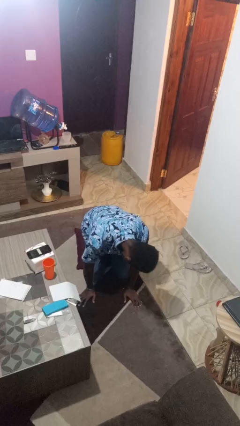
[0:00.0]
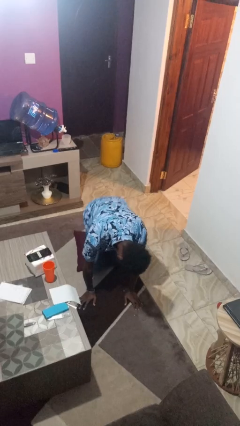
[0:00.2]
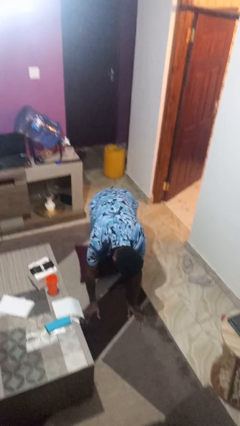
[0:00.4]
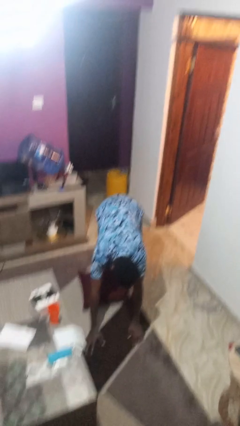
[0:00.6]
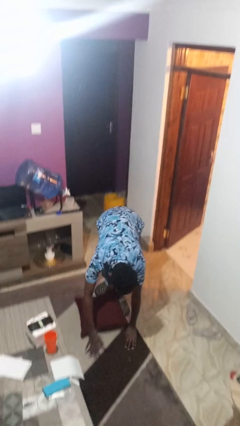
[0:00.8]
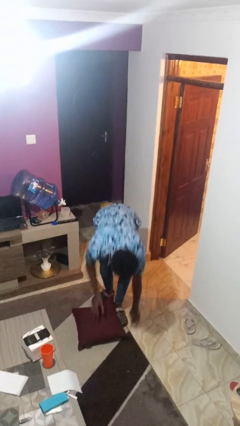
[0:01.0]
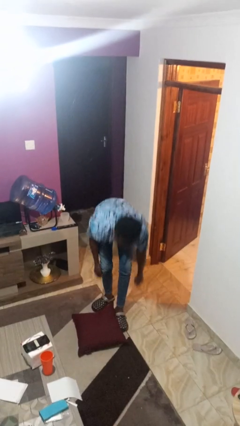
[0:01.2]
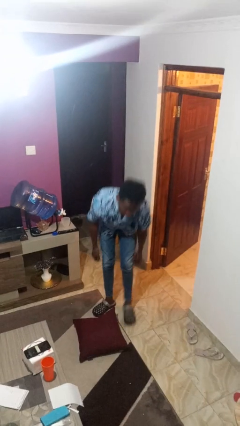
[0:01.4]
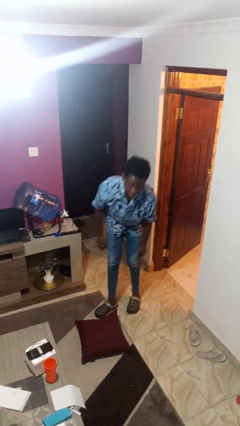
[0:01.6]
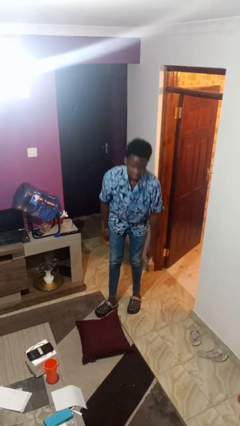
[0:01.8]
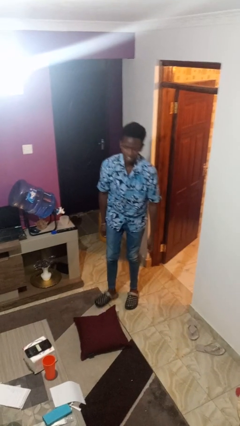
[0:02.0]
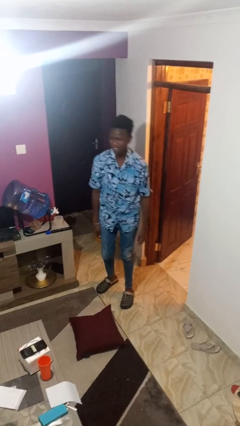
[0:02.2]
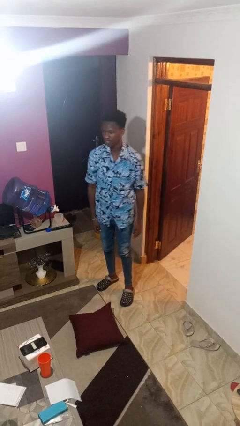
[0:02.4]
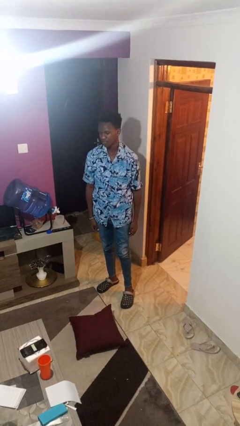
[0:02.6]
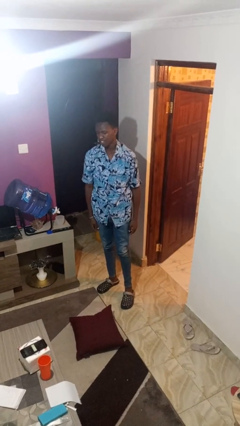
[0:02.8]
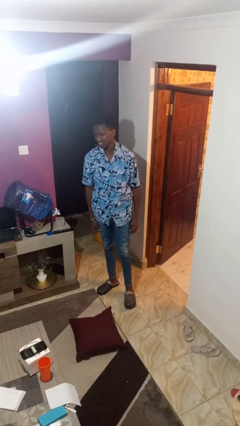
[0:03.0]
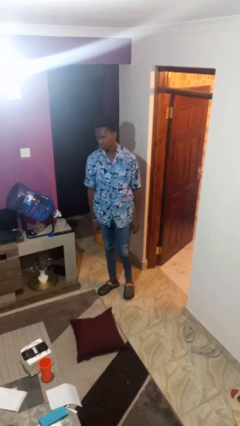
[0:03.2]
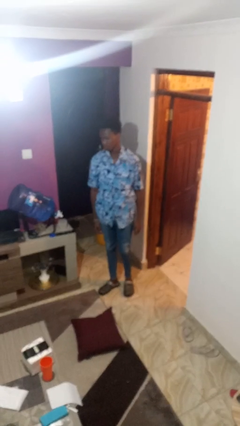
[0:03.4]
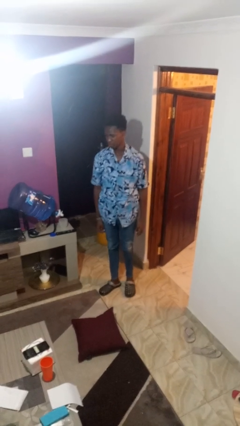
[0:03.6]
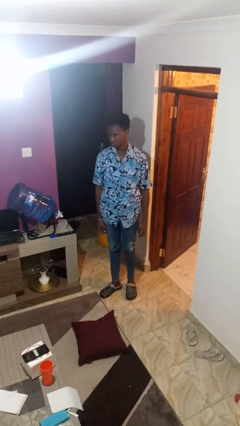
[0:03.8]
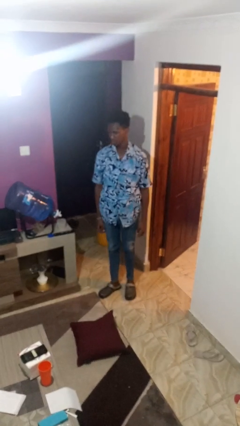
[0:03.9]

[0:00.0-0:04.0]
person stands up from floor

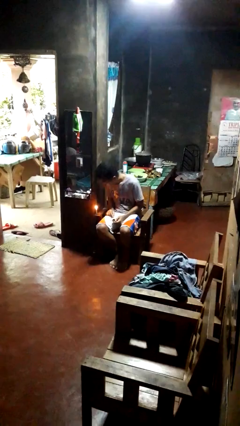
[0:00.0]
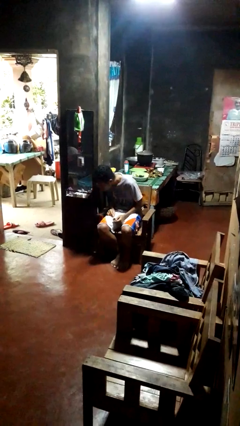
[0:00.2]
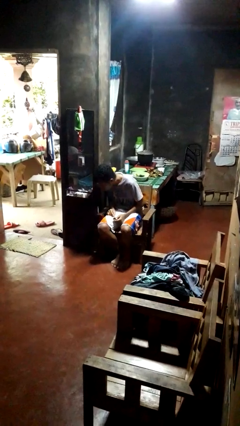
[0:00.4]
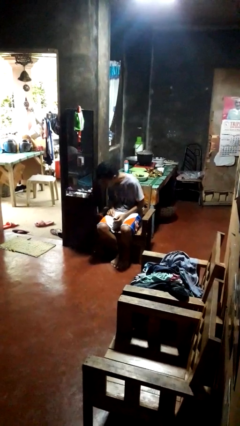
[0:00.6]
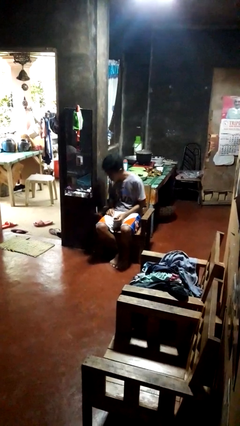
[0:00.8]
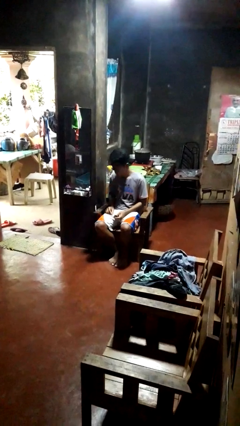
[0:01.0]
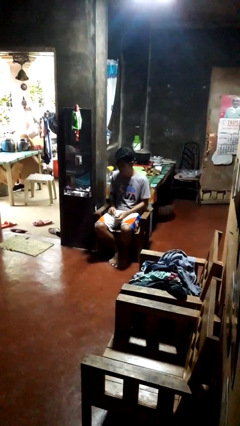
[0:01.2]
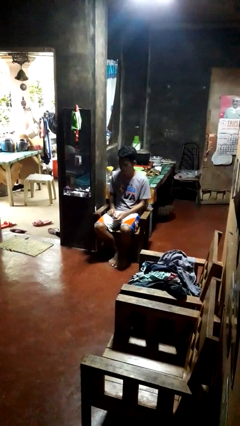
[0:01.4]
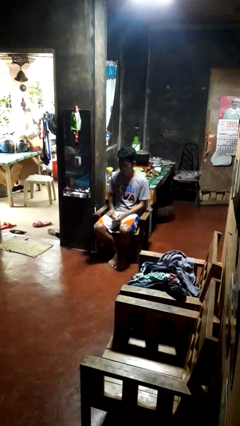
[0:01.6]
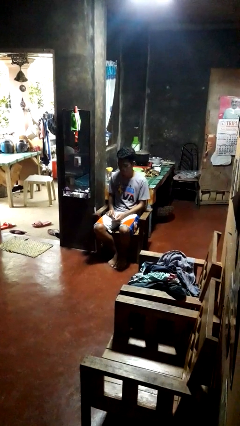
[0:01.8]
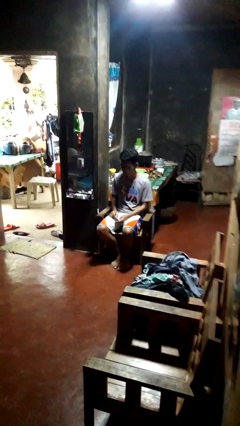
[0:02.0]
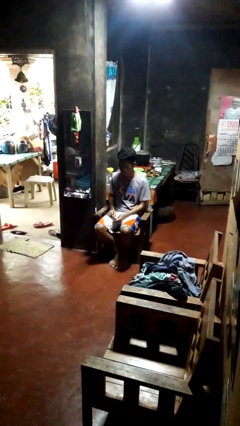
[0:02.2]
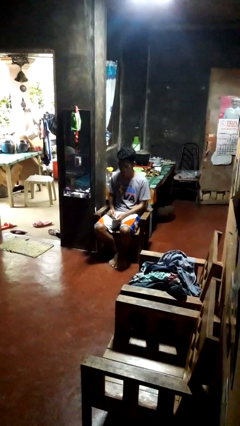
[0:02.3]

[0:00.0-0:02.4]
person extinguishes candle

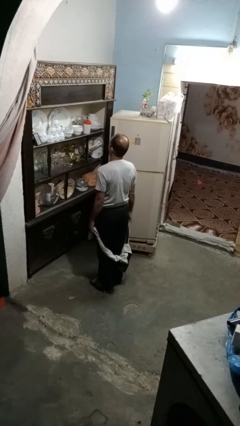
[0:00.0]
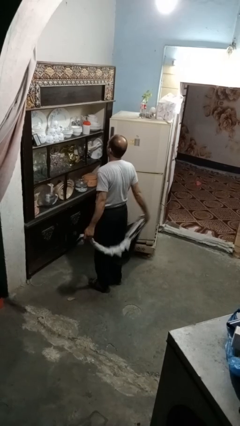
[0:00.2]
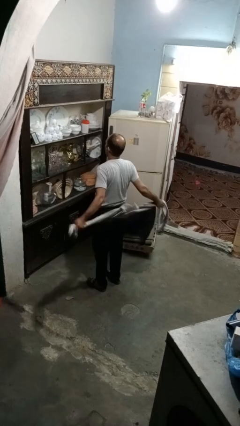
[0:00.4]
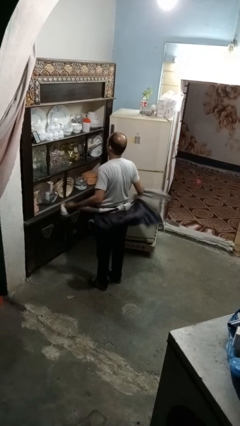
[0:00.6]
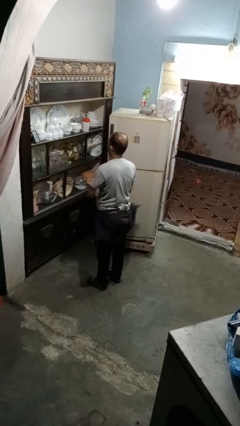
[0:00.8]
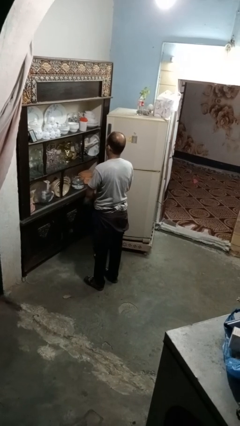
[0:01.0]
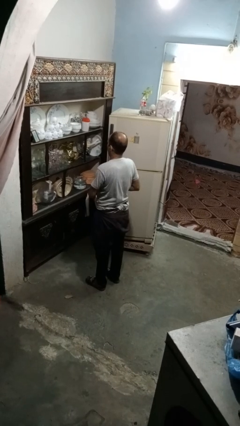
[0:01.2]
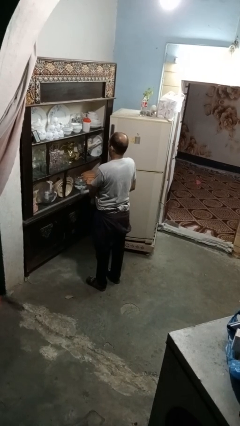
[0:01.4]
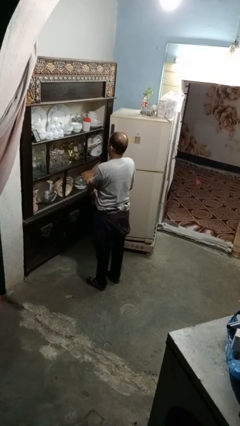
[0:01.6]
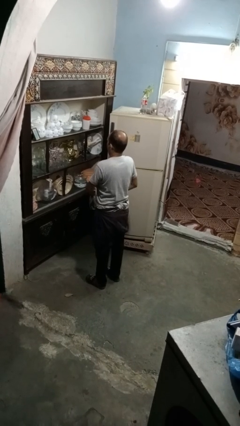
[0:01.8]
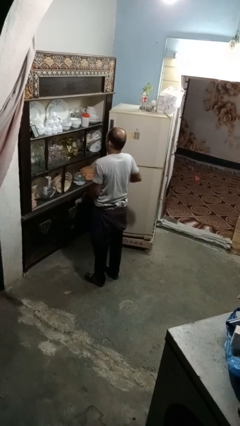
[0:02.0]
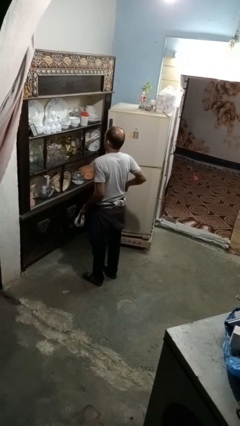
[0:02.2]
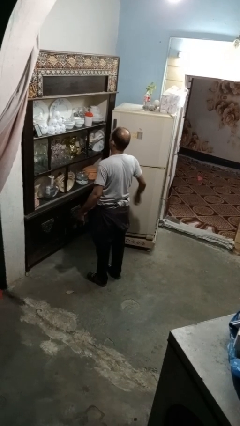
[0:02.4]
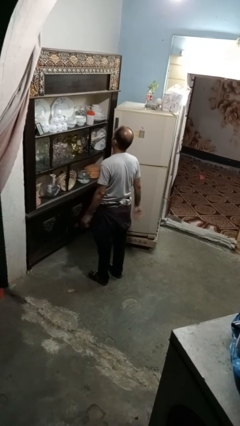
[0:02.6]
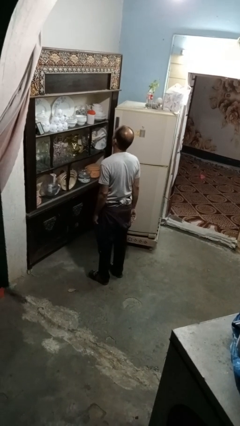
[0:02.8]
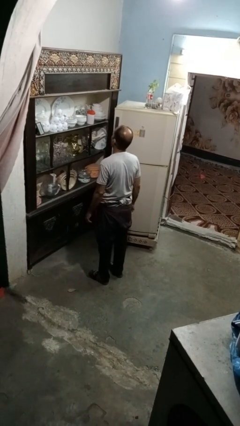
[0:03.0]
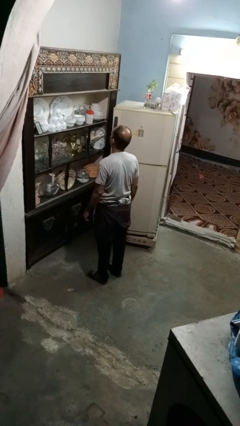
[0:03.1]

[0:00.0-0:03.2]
person ties jacket around waist

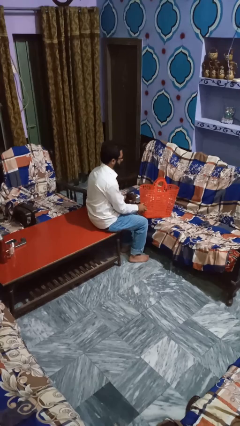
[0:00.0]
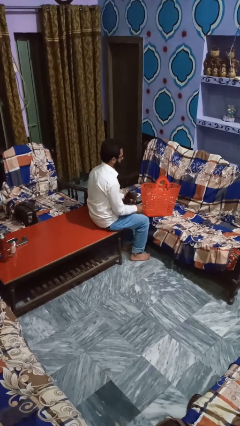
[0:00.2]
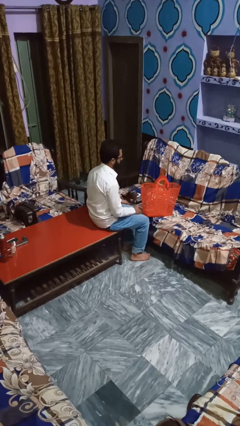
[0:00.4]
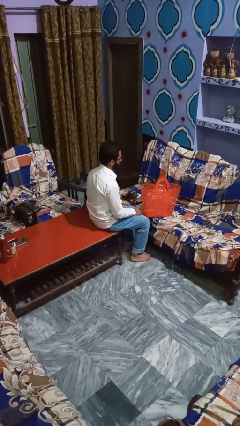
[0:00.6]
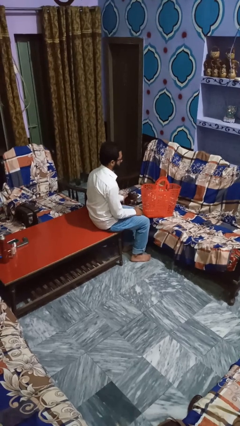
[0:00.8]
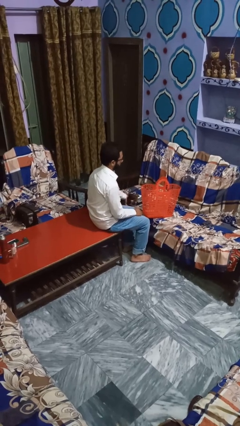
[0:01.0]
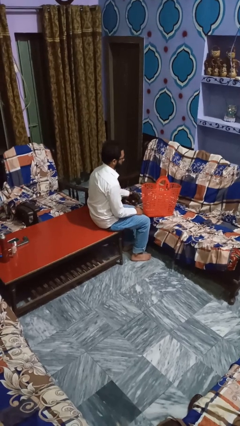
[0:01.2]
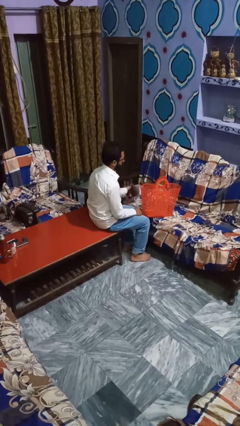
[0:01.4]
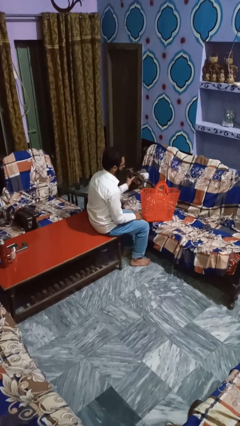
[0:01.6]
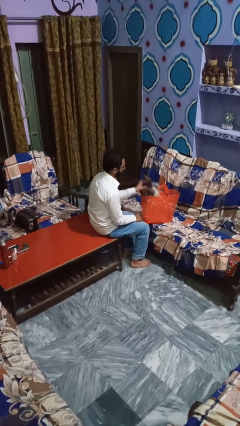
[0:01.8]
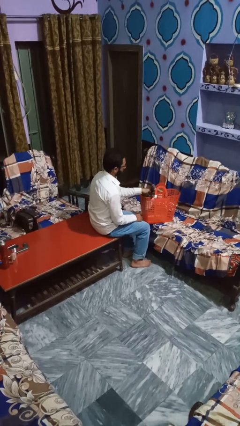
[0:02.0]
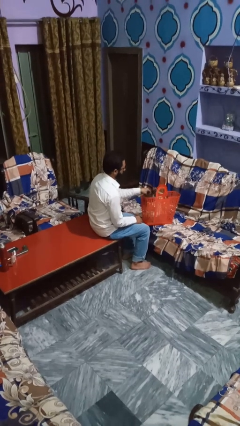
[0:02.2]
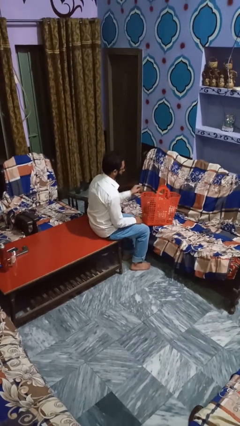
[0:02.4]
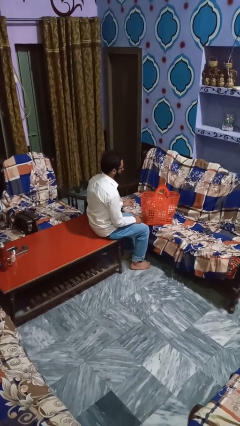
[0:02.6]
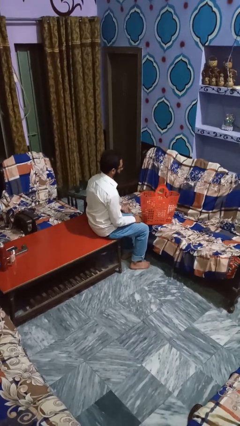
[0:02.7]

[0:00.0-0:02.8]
person discards trash

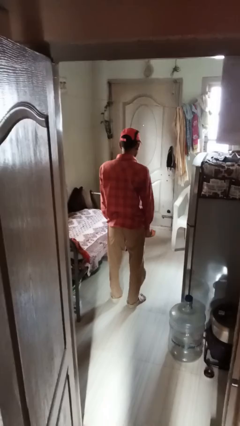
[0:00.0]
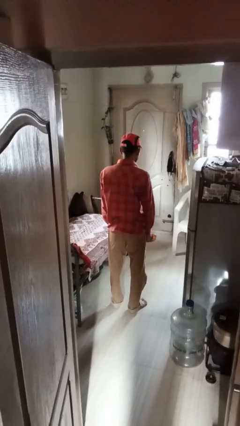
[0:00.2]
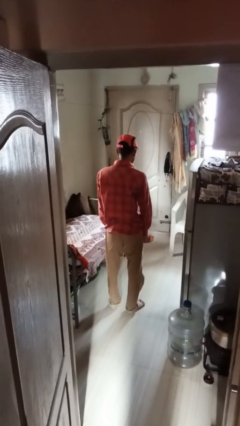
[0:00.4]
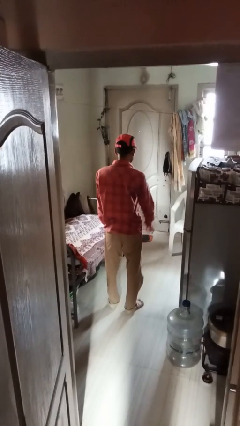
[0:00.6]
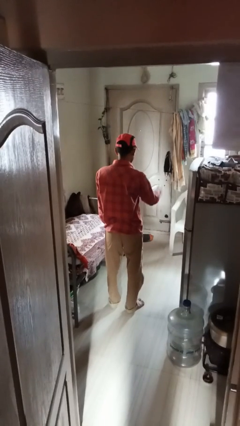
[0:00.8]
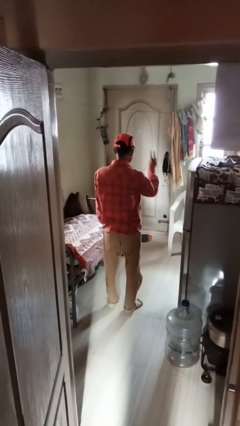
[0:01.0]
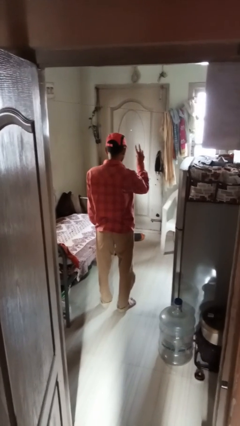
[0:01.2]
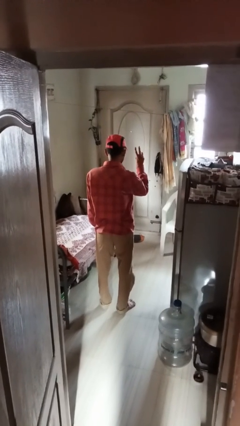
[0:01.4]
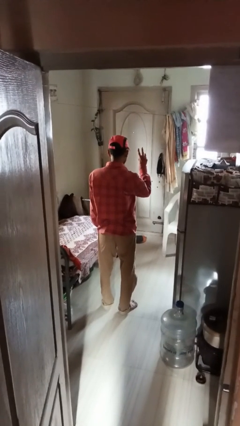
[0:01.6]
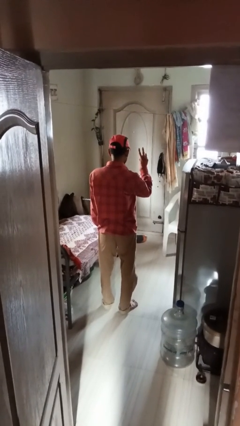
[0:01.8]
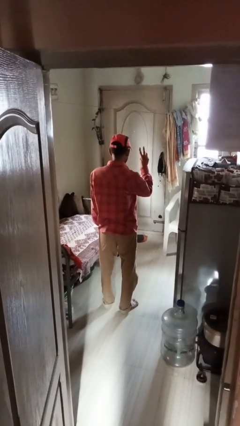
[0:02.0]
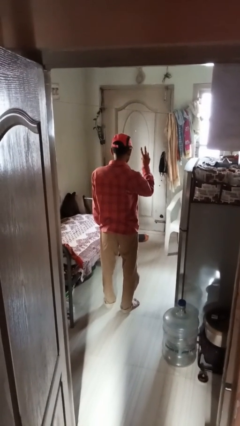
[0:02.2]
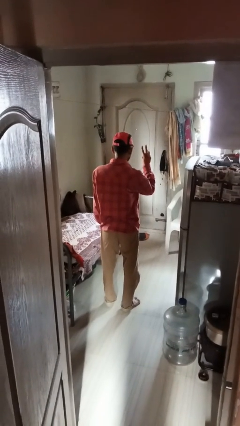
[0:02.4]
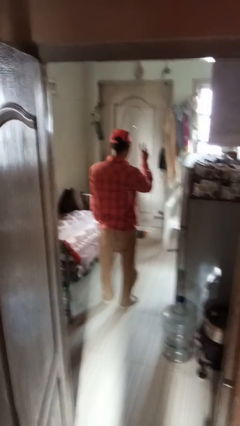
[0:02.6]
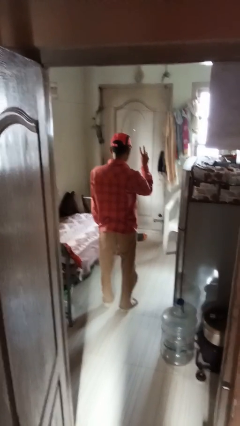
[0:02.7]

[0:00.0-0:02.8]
person gestures peace

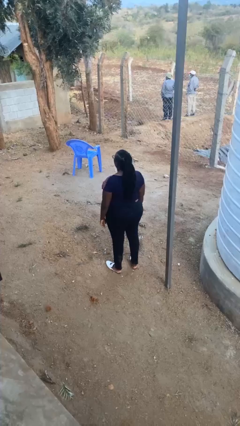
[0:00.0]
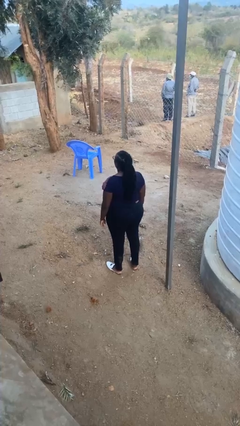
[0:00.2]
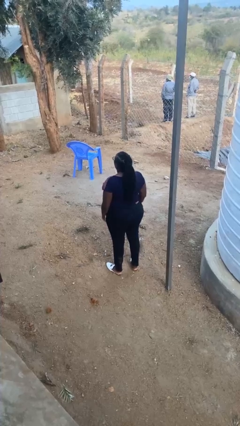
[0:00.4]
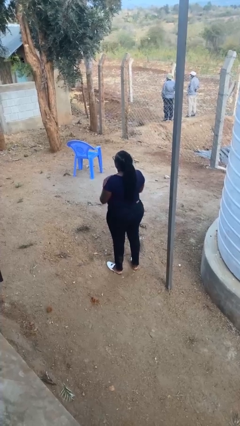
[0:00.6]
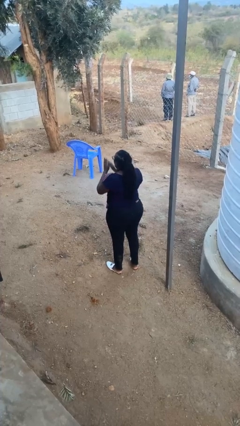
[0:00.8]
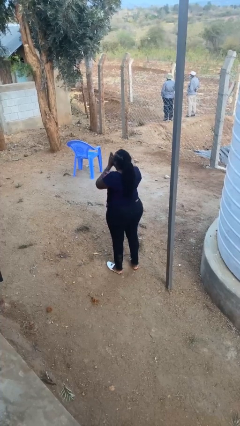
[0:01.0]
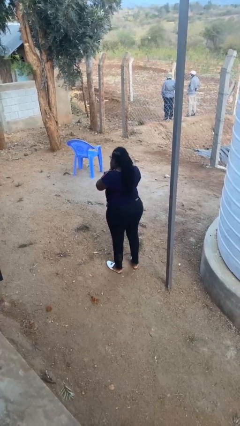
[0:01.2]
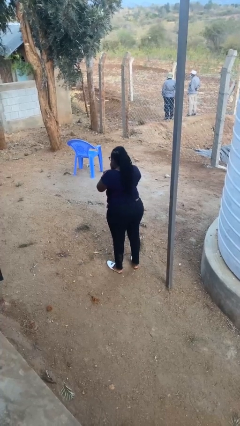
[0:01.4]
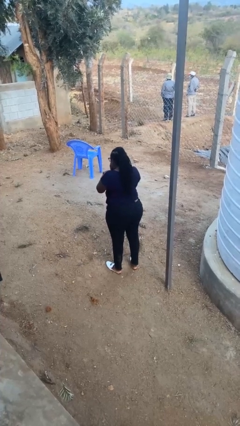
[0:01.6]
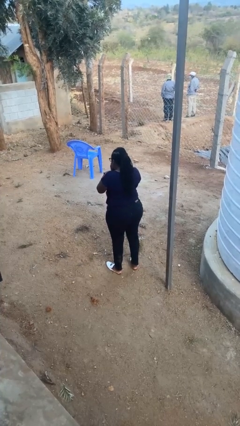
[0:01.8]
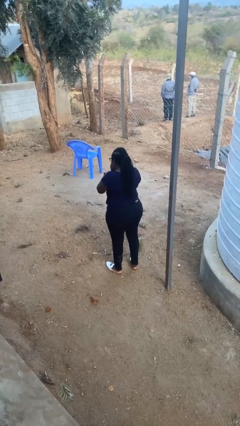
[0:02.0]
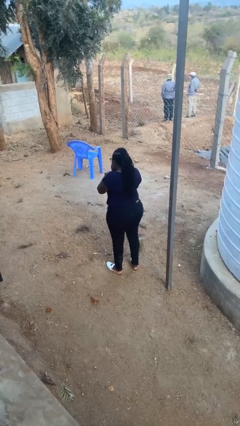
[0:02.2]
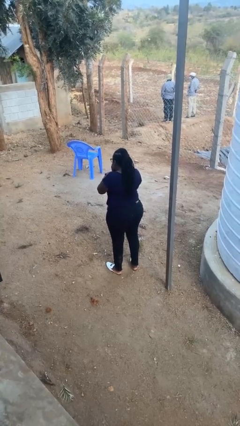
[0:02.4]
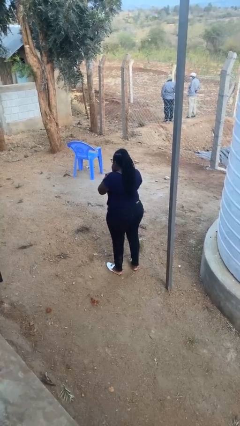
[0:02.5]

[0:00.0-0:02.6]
person sneezes into hand
